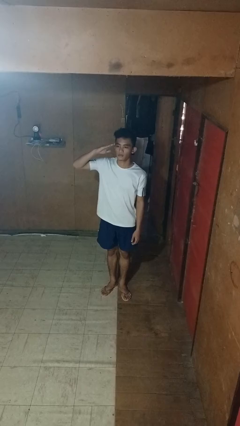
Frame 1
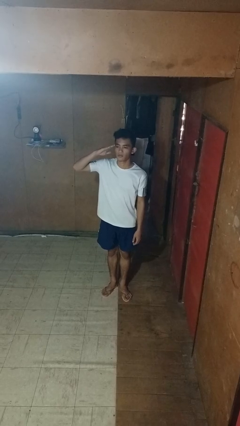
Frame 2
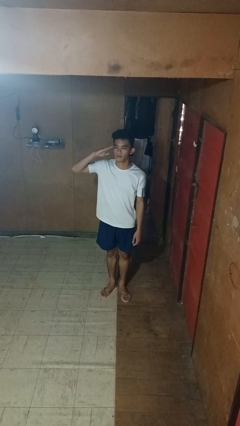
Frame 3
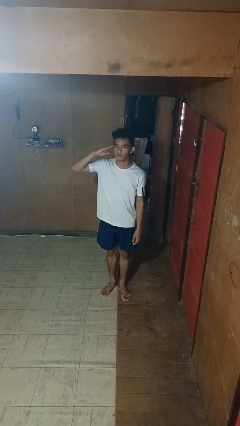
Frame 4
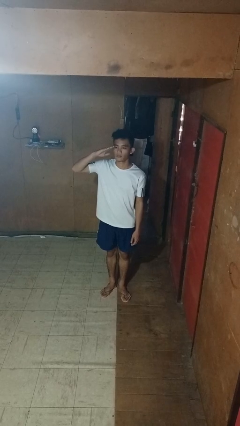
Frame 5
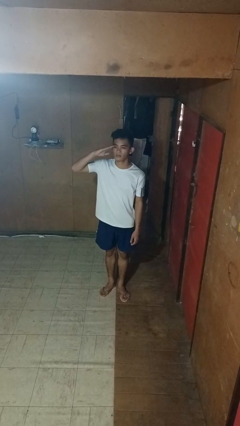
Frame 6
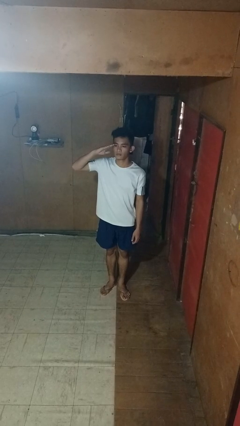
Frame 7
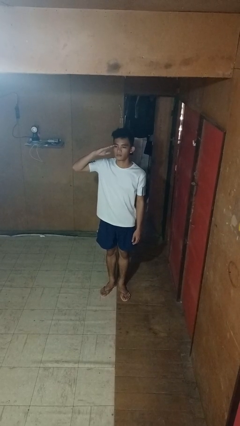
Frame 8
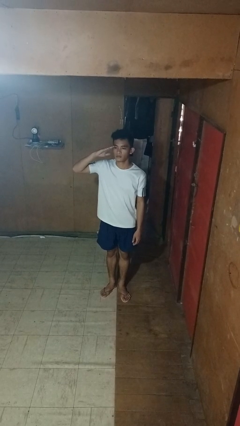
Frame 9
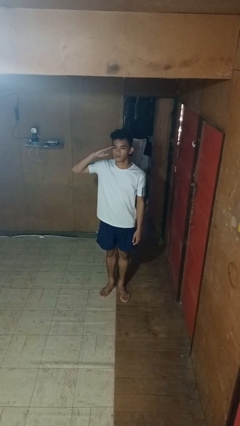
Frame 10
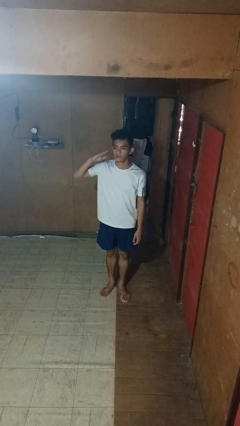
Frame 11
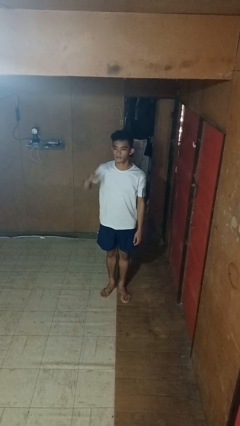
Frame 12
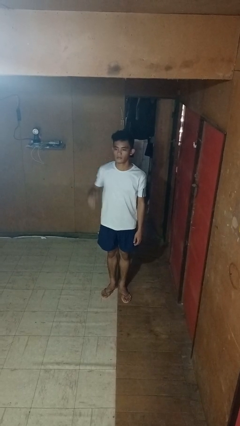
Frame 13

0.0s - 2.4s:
person salutes

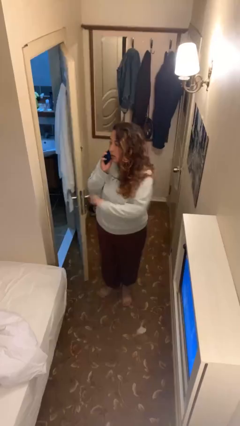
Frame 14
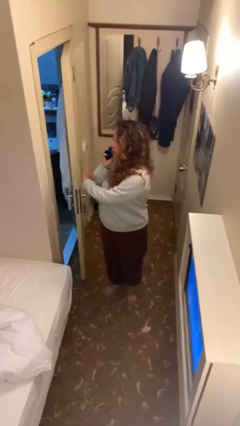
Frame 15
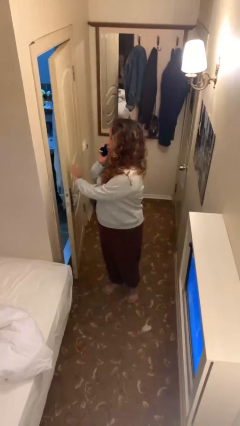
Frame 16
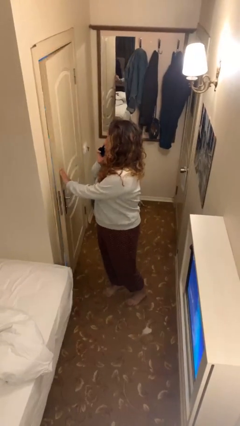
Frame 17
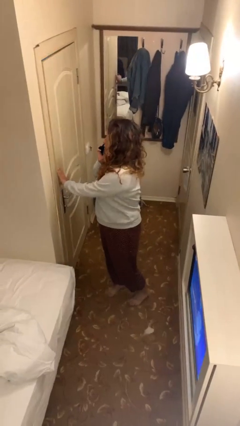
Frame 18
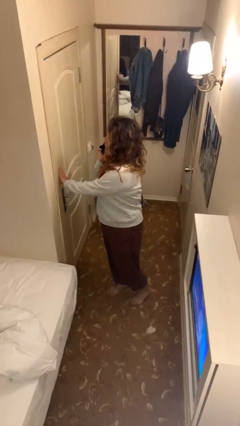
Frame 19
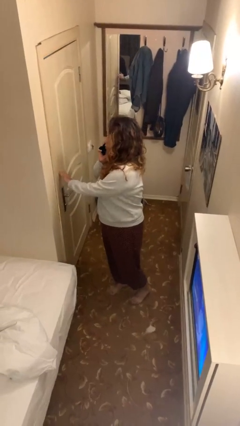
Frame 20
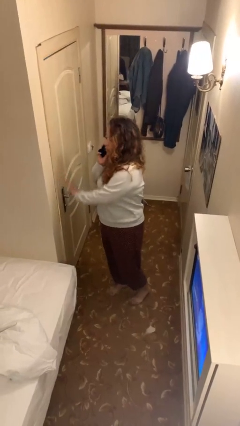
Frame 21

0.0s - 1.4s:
person closes facility door

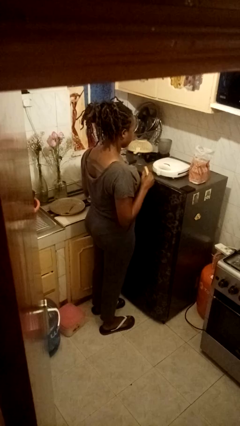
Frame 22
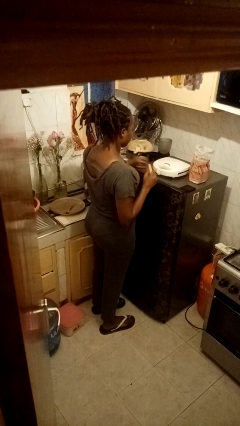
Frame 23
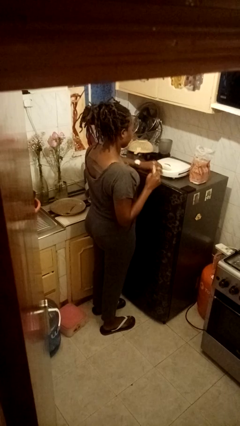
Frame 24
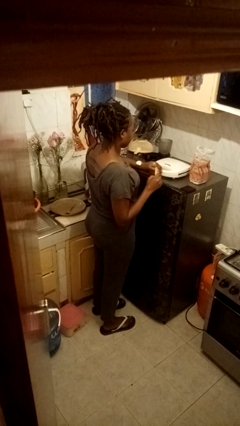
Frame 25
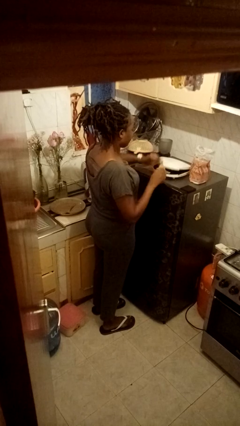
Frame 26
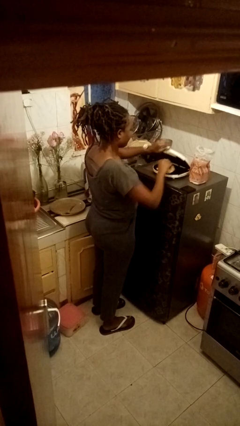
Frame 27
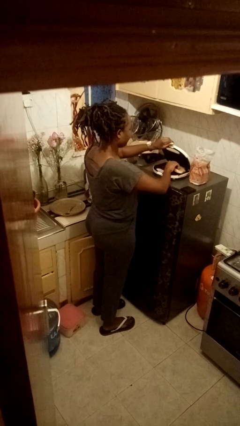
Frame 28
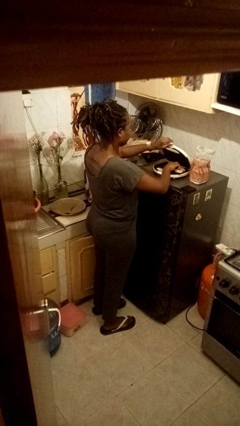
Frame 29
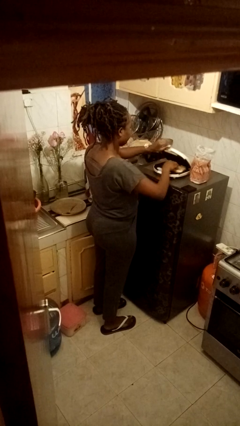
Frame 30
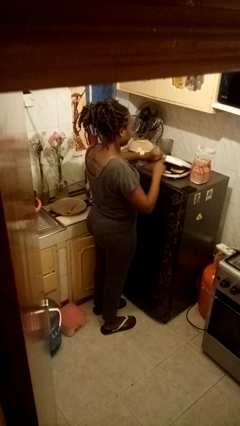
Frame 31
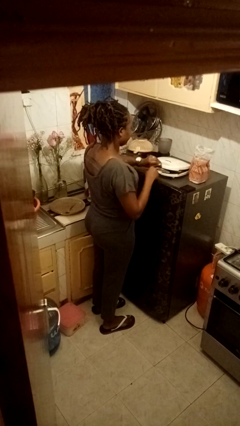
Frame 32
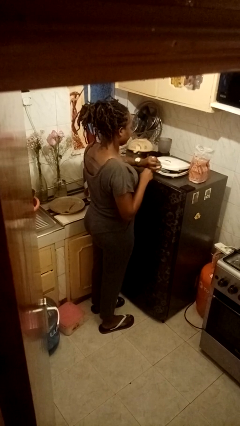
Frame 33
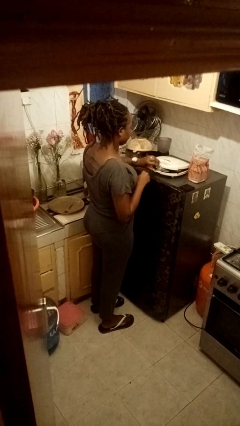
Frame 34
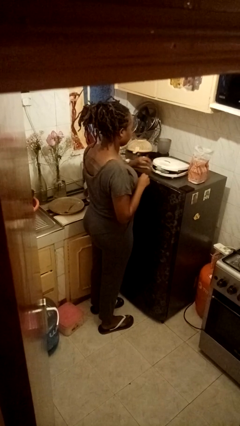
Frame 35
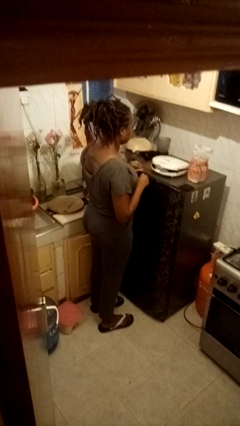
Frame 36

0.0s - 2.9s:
person puts object into toaster

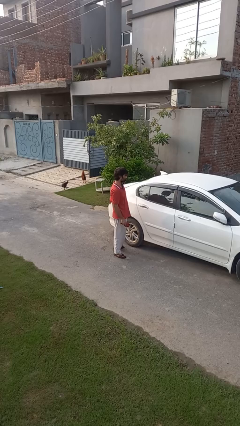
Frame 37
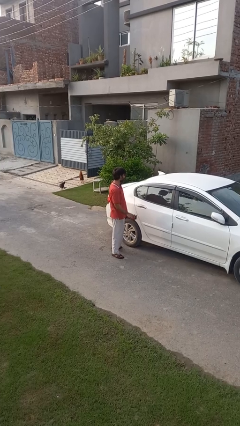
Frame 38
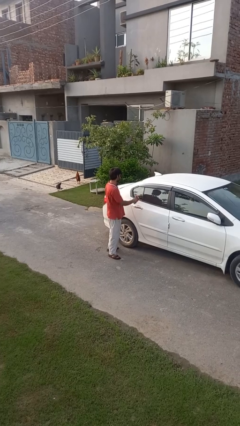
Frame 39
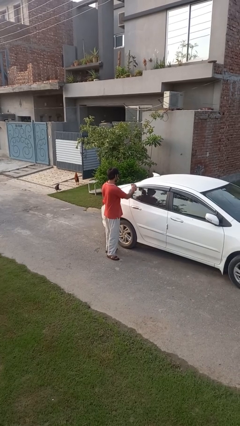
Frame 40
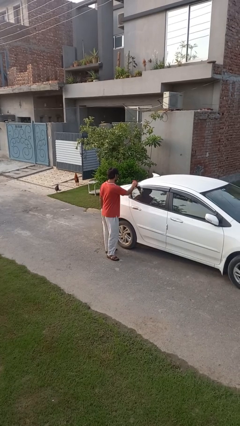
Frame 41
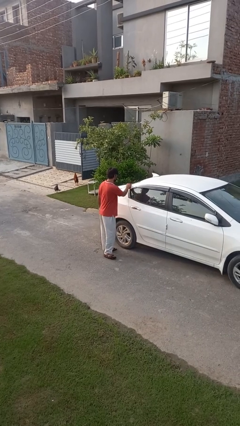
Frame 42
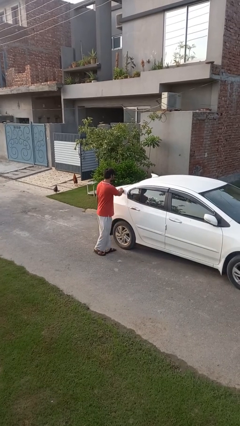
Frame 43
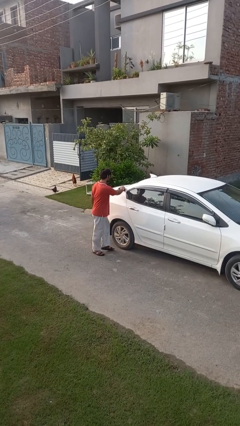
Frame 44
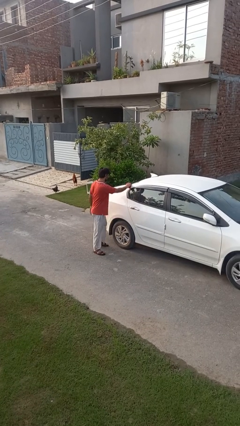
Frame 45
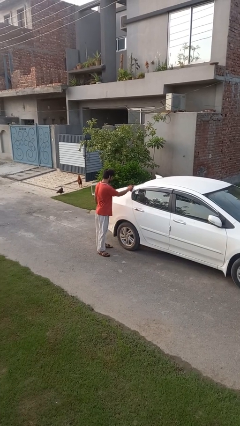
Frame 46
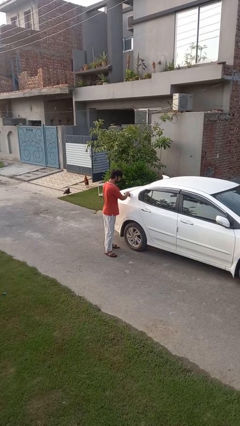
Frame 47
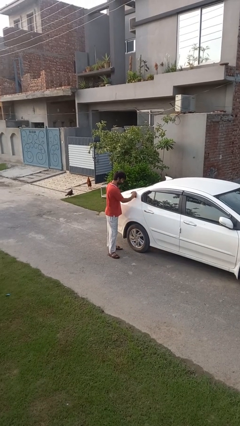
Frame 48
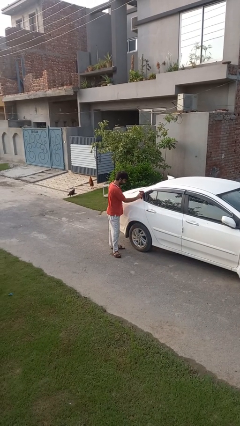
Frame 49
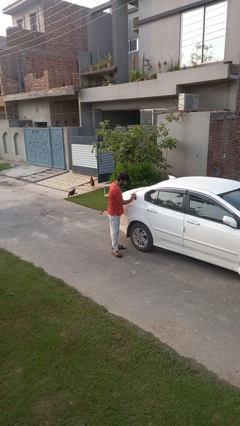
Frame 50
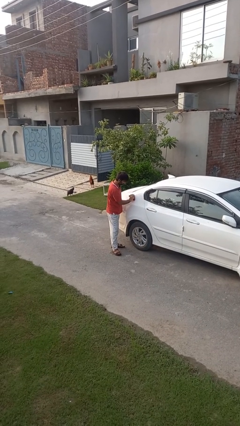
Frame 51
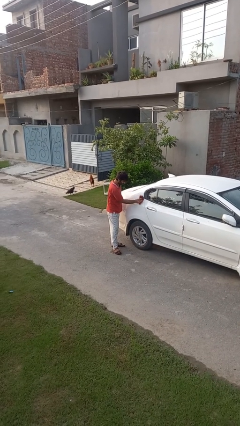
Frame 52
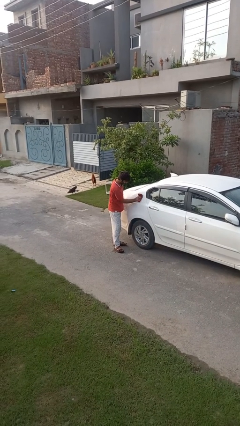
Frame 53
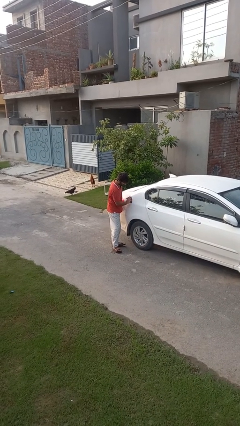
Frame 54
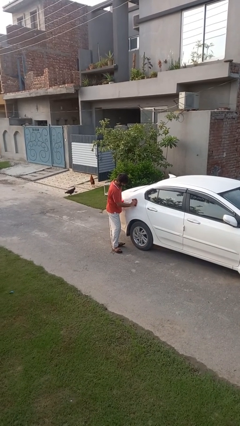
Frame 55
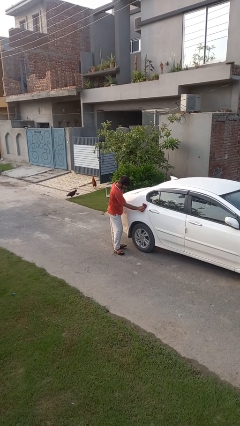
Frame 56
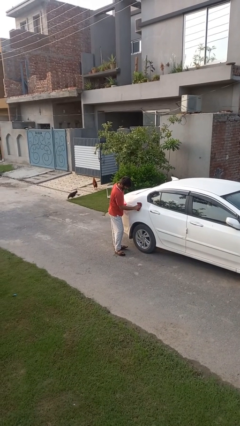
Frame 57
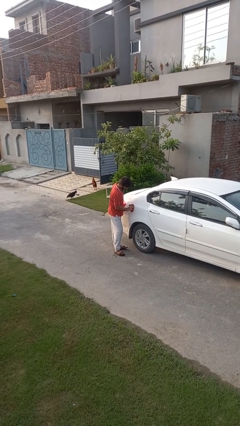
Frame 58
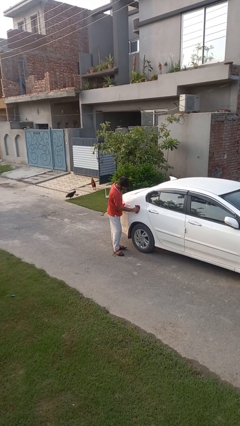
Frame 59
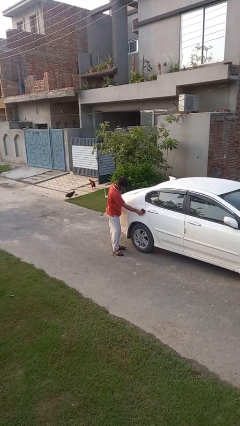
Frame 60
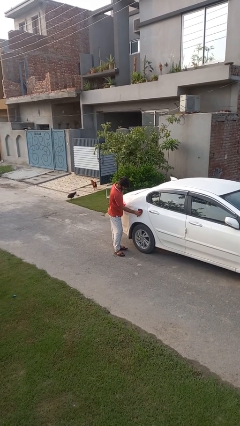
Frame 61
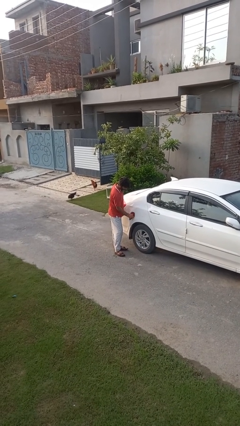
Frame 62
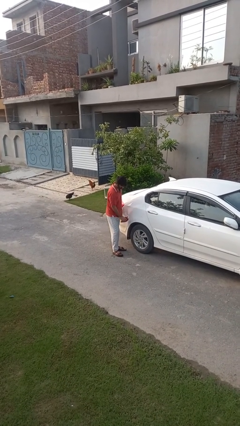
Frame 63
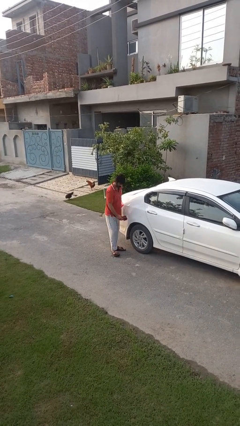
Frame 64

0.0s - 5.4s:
person polishes car with rag

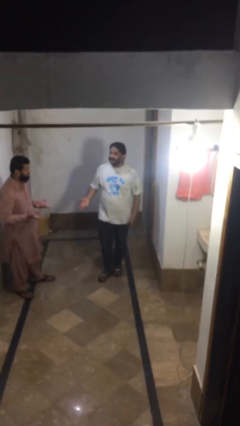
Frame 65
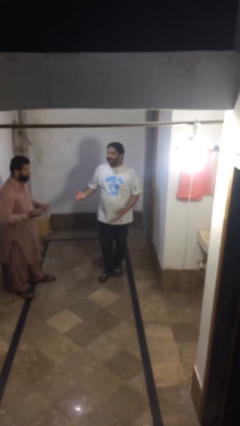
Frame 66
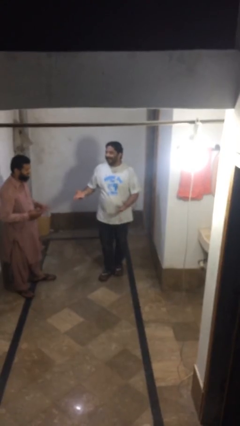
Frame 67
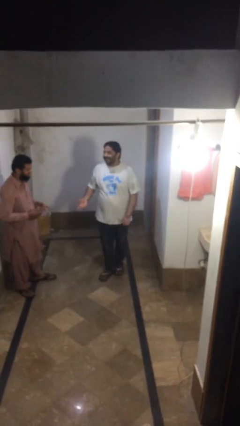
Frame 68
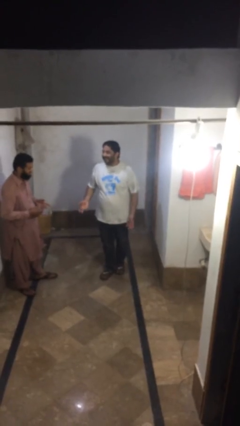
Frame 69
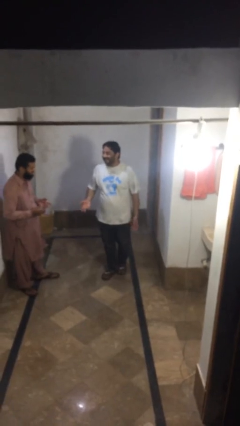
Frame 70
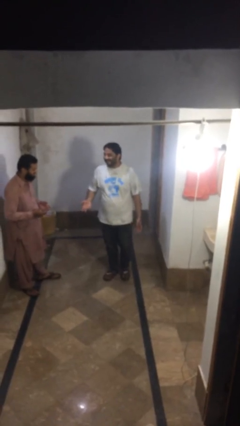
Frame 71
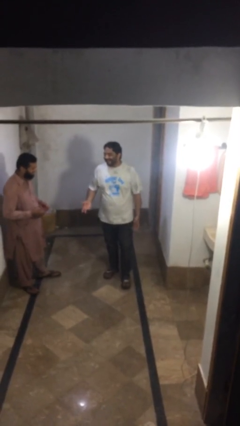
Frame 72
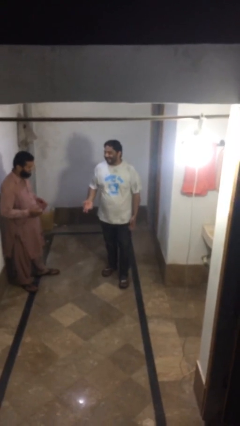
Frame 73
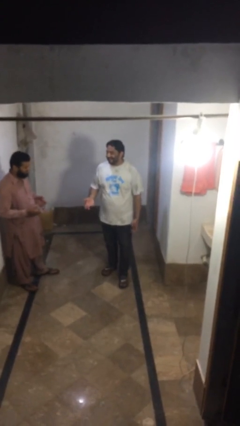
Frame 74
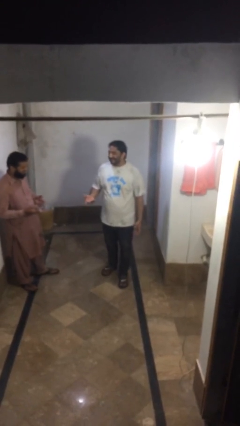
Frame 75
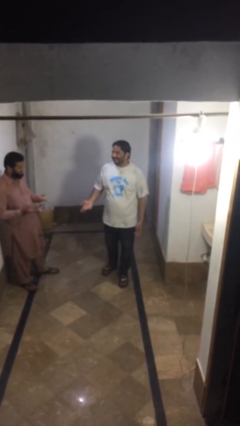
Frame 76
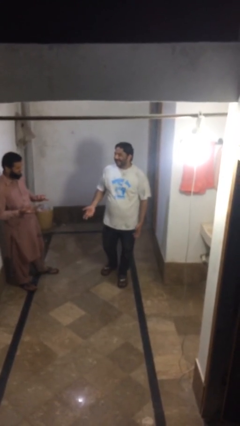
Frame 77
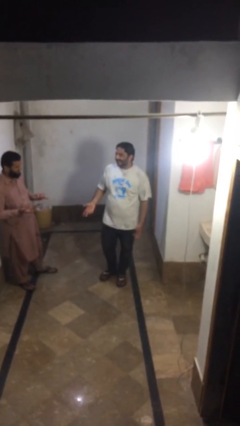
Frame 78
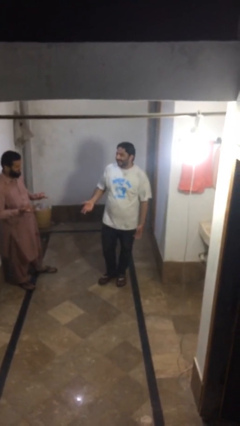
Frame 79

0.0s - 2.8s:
person talks to person

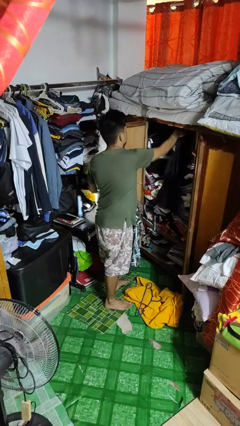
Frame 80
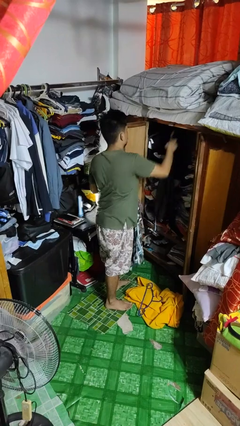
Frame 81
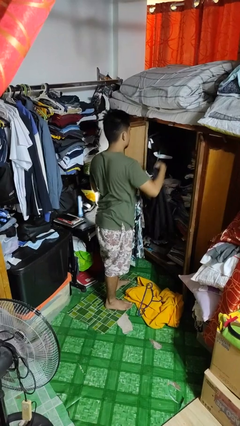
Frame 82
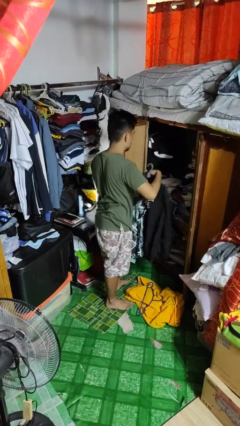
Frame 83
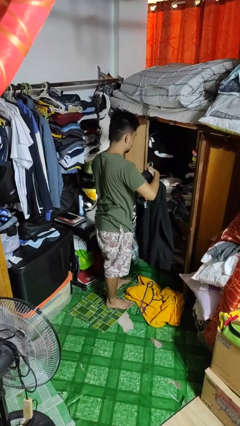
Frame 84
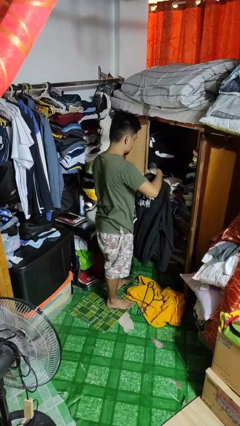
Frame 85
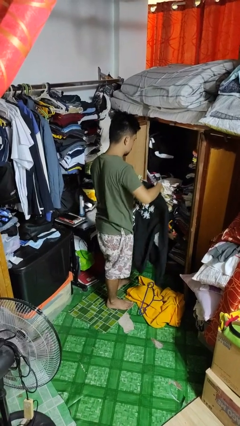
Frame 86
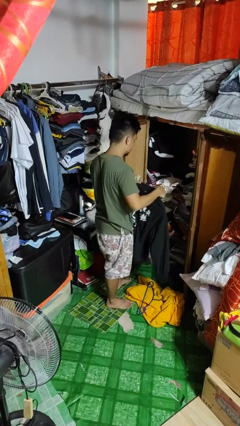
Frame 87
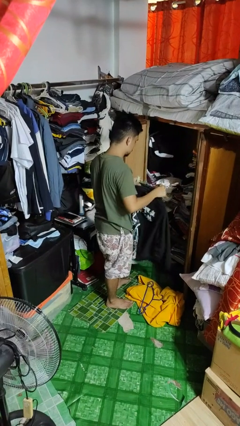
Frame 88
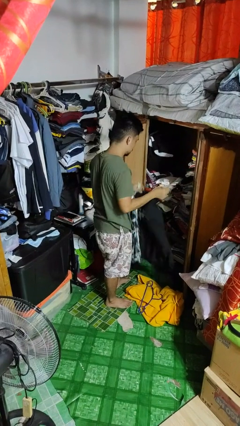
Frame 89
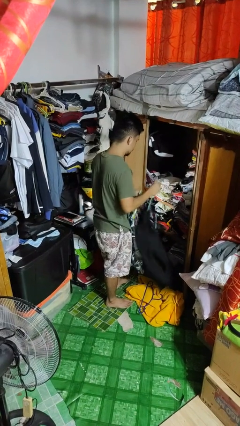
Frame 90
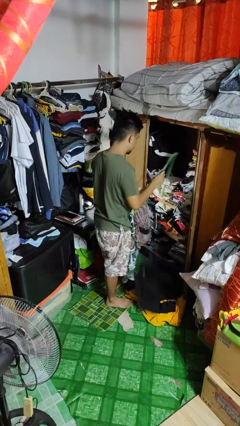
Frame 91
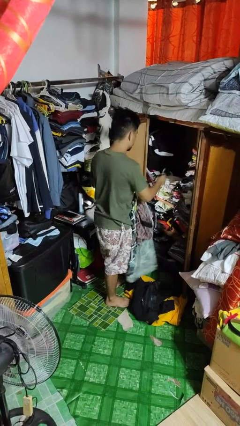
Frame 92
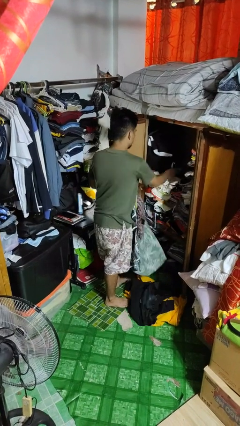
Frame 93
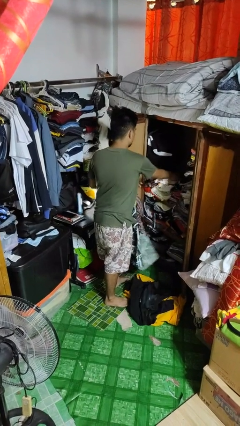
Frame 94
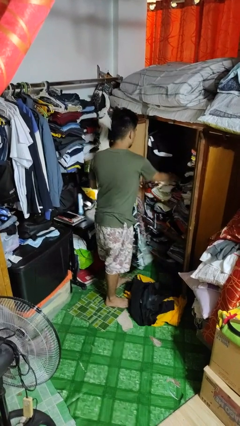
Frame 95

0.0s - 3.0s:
person takes clothes from closet
